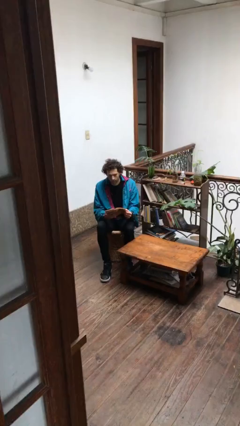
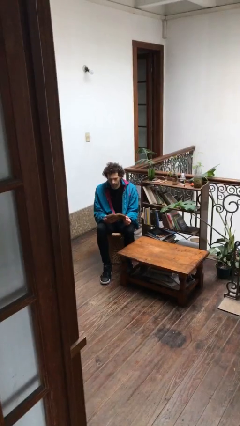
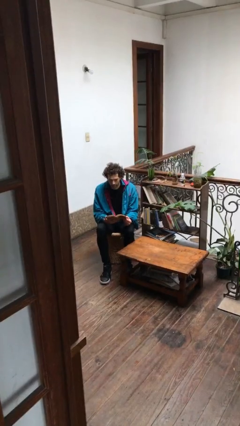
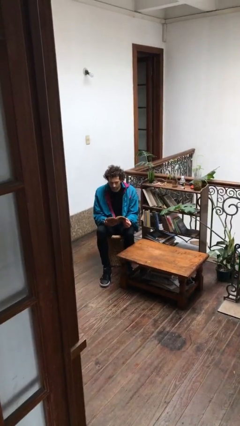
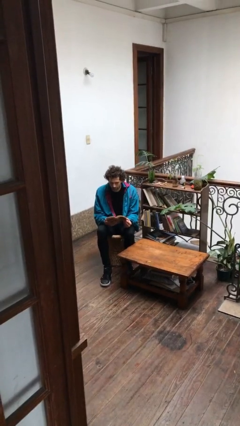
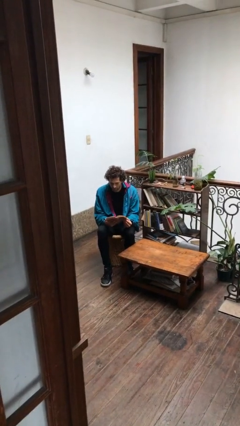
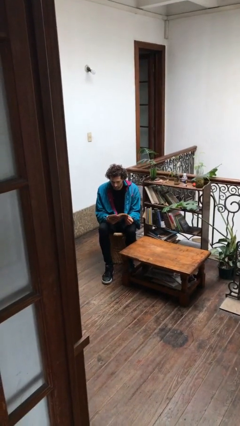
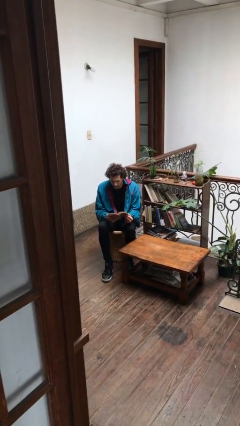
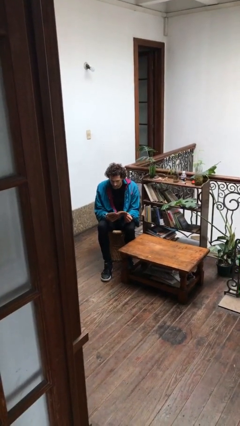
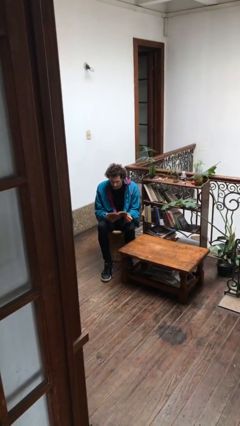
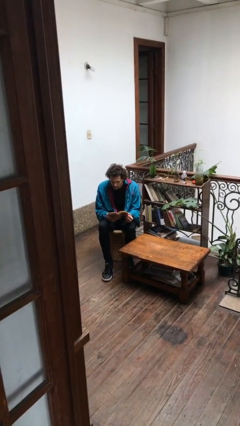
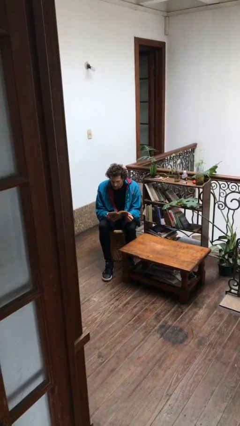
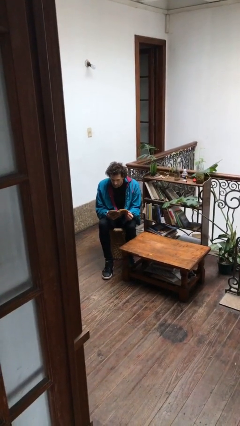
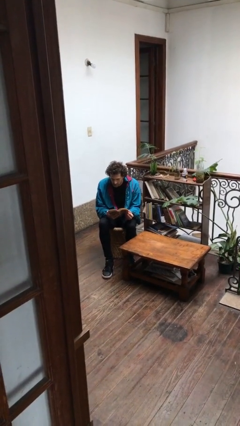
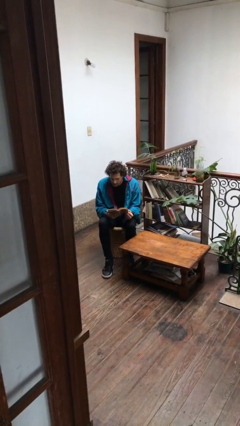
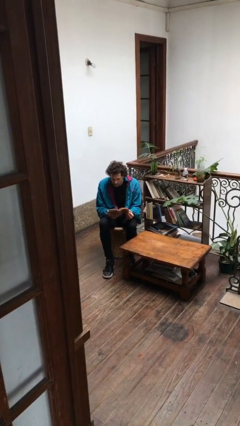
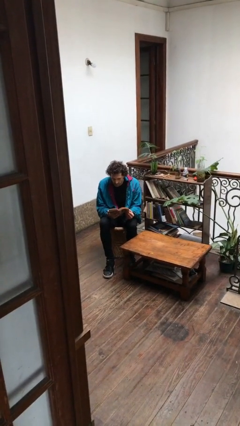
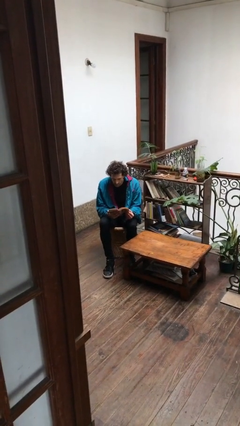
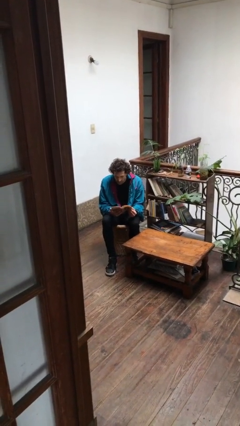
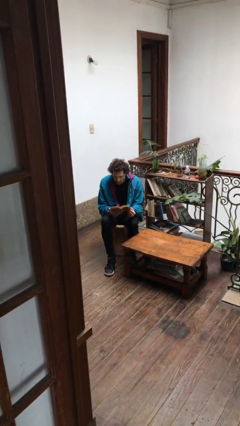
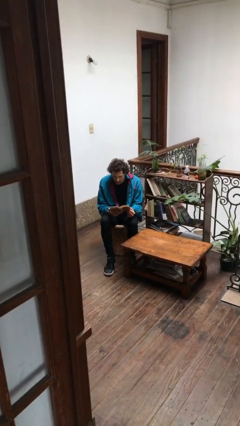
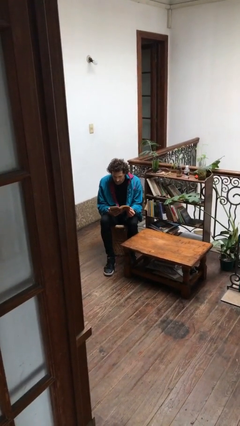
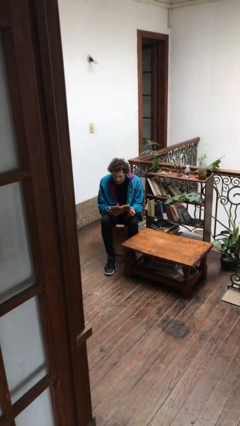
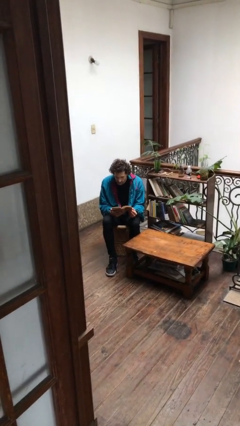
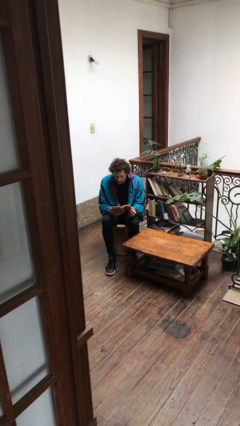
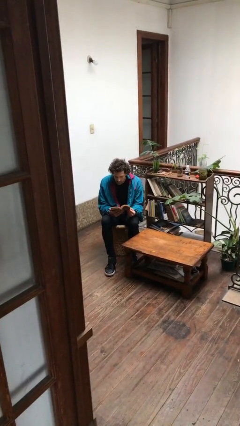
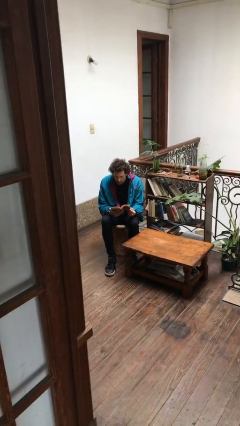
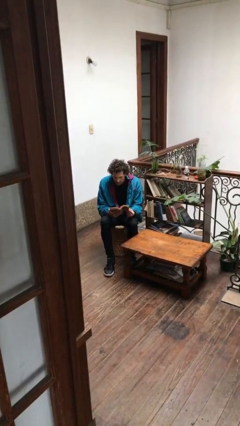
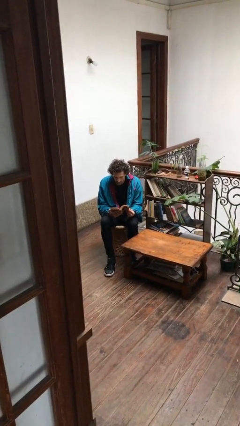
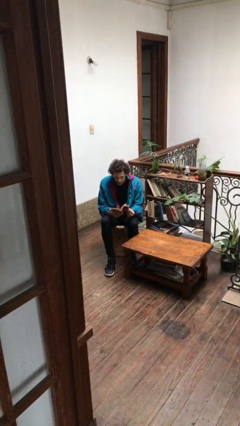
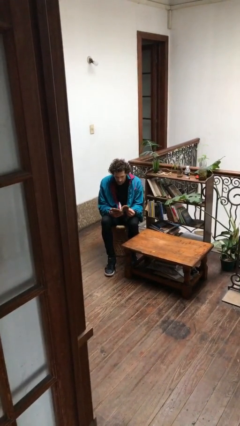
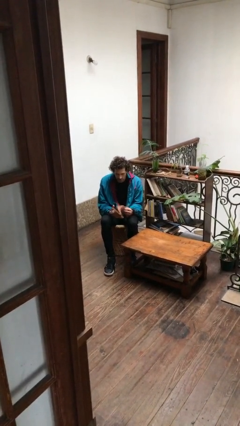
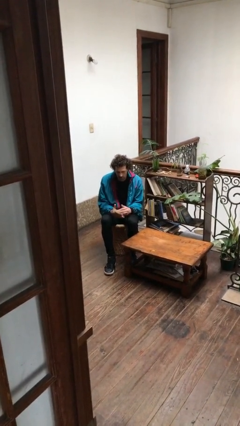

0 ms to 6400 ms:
person reads document

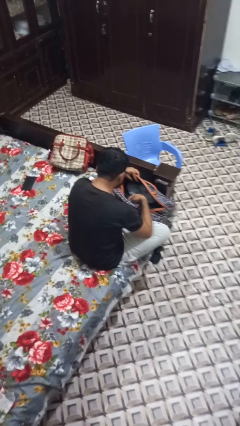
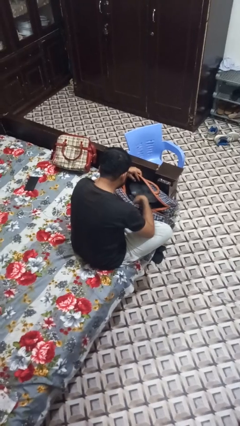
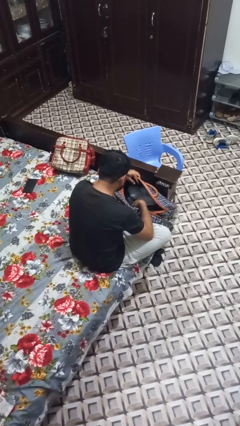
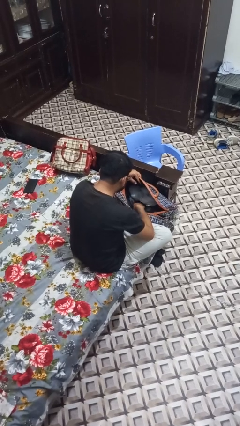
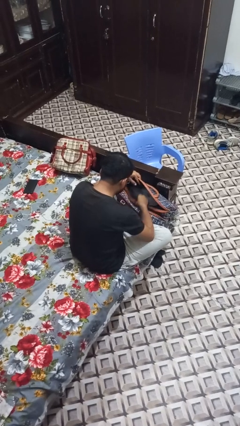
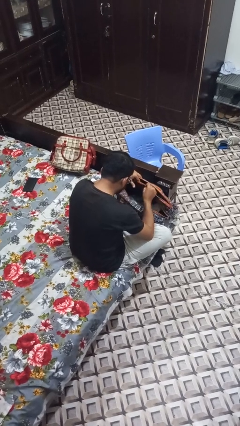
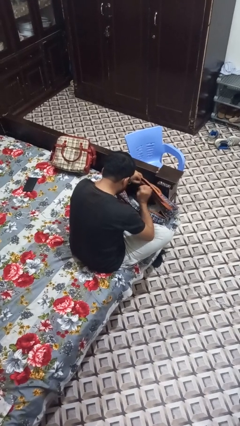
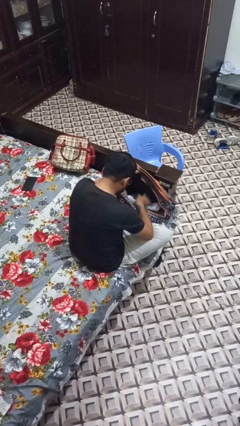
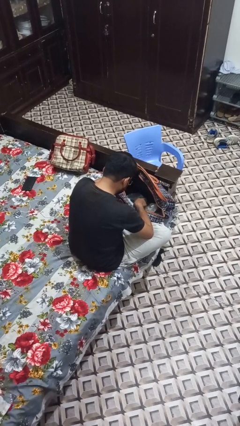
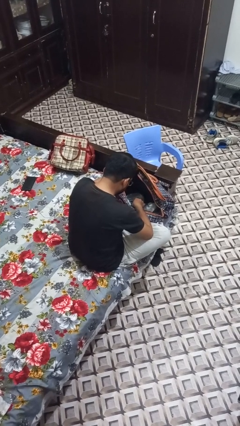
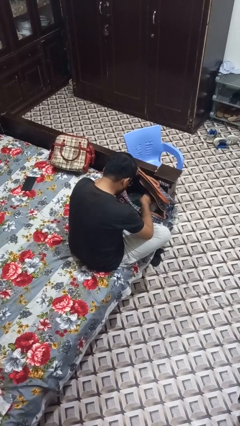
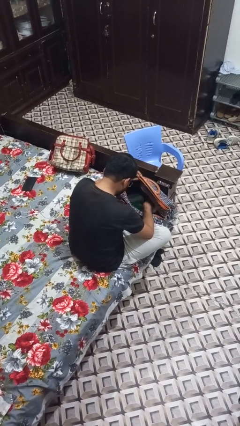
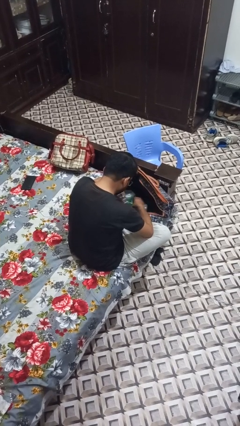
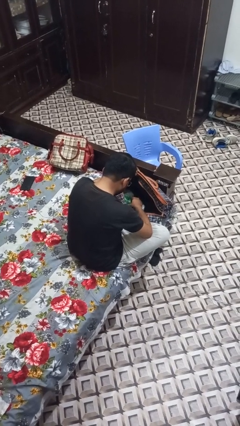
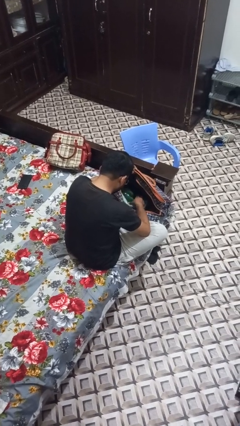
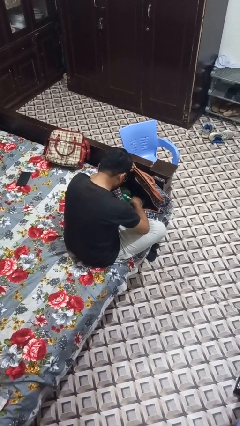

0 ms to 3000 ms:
person searches in backpack

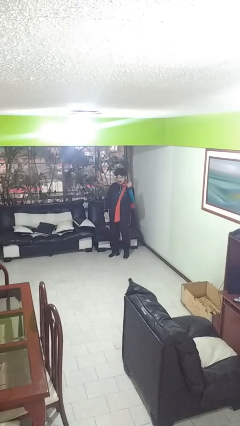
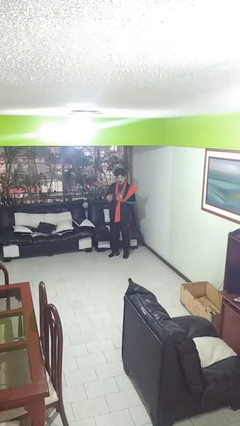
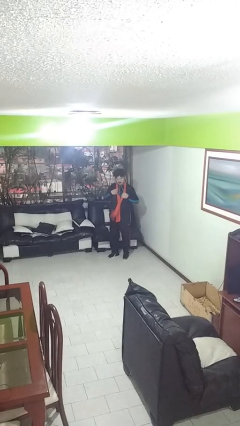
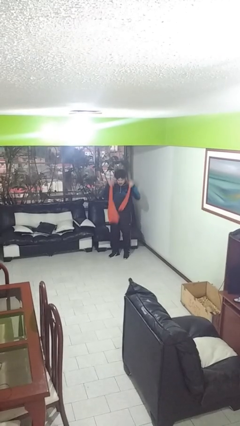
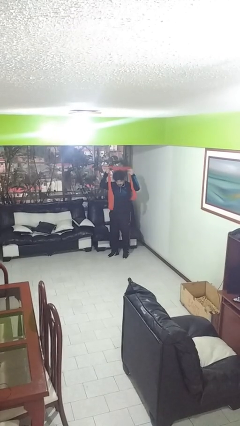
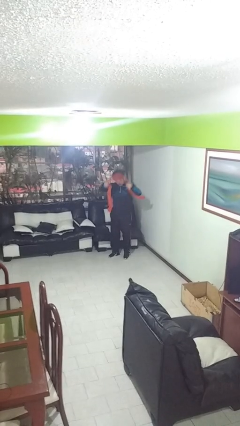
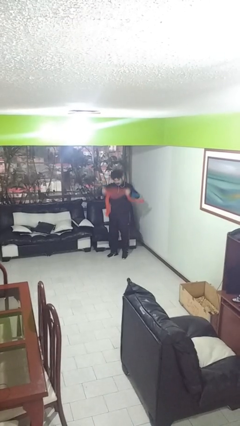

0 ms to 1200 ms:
person takes off scarf

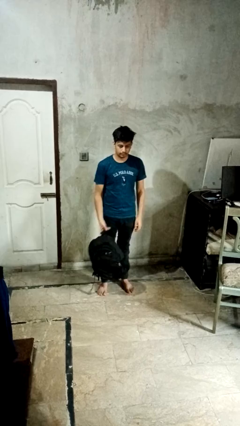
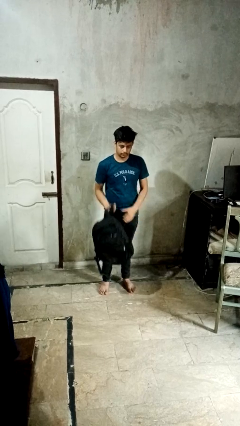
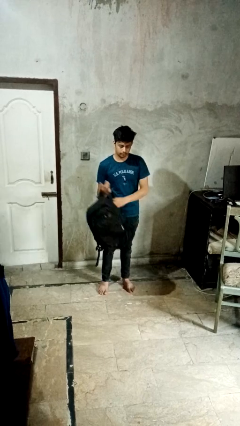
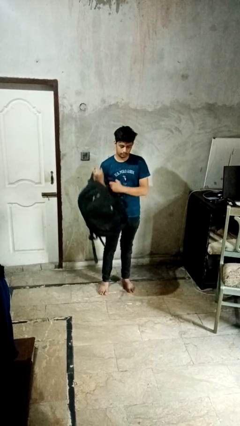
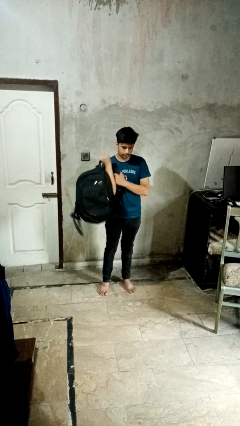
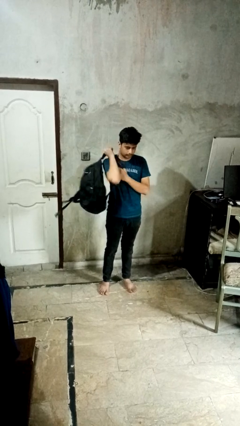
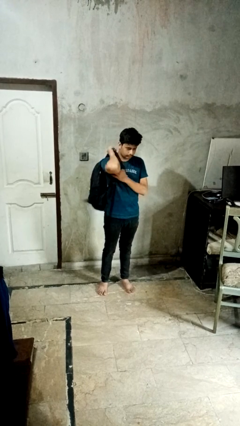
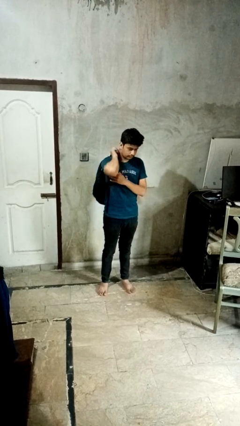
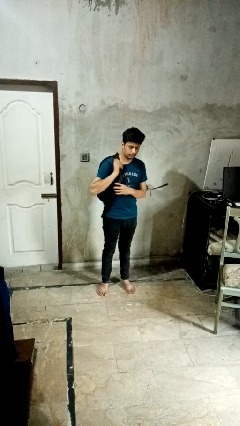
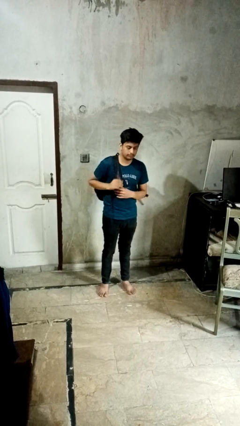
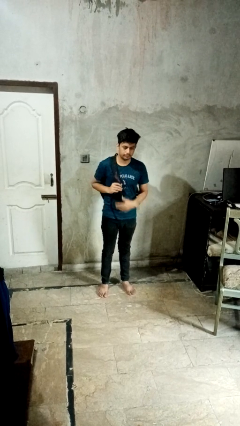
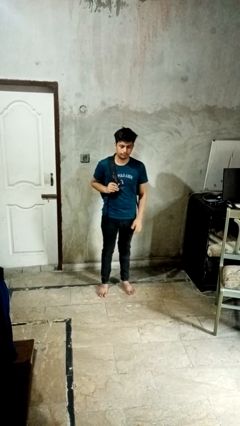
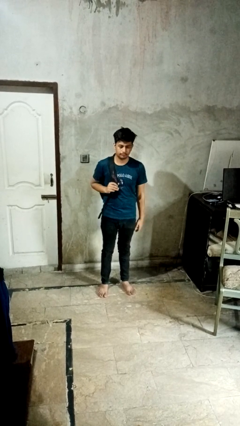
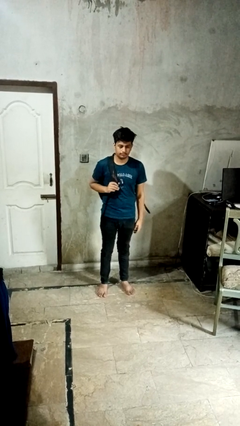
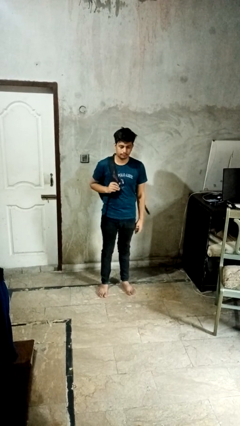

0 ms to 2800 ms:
person puts on backpack

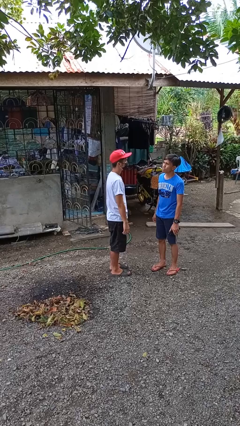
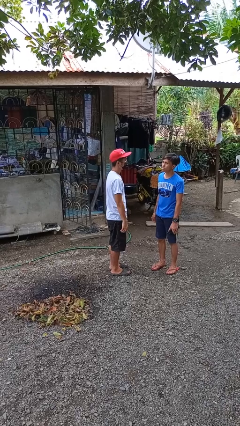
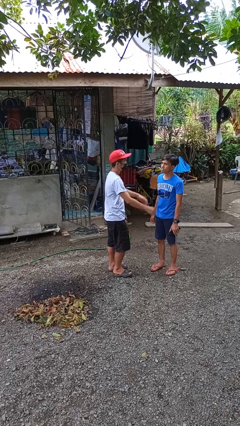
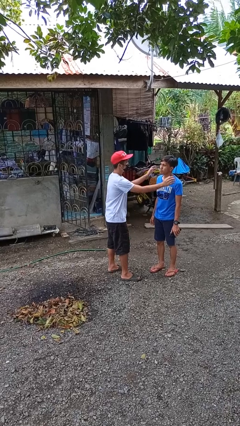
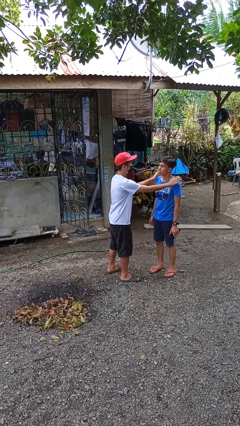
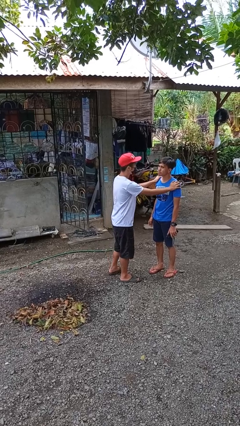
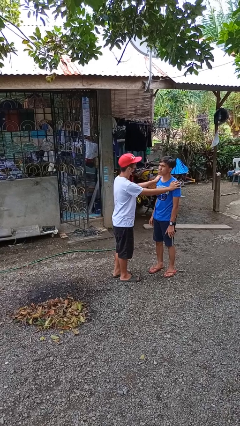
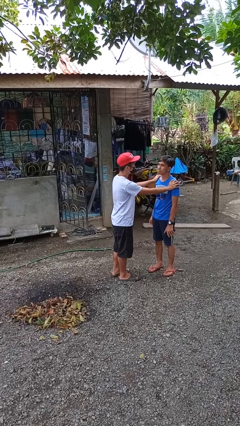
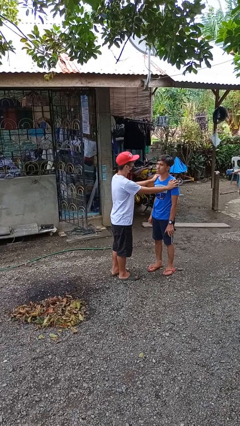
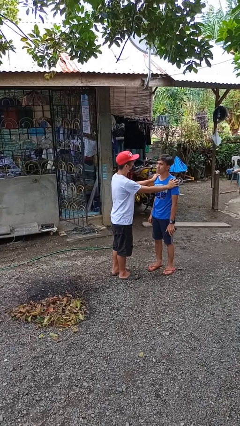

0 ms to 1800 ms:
person grabs person by shoulder

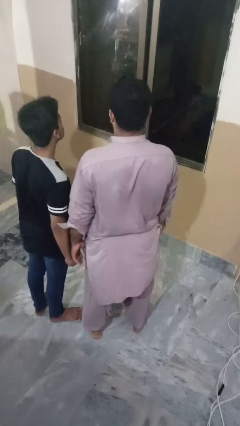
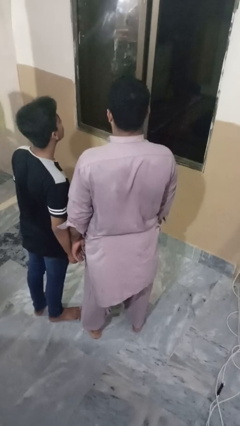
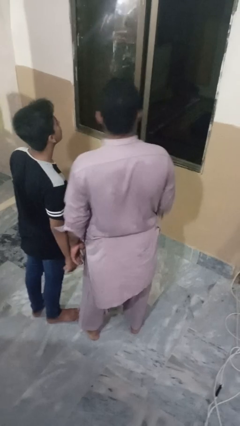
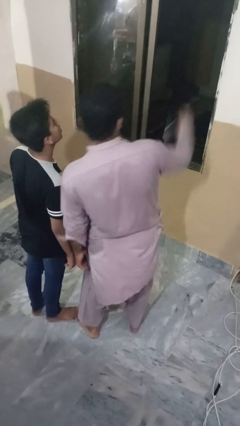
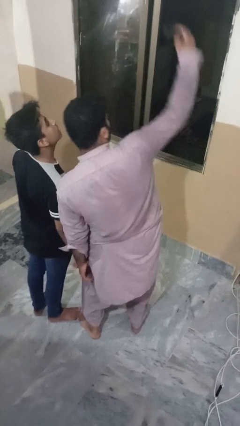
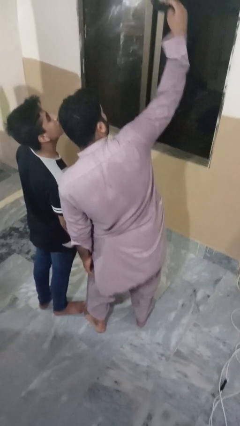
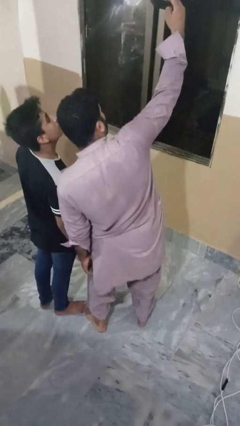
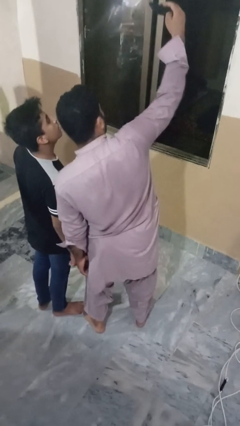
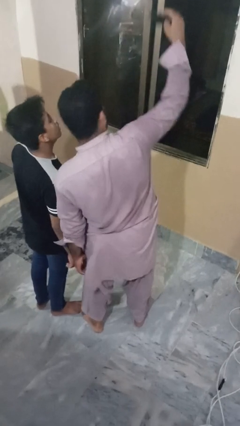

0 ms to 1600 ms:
person takes selfie with person

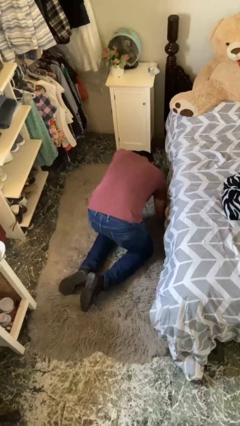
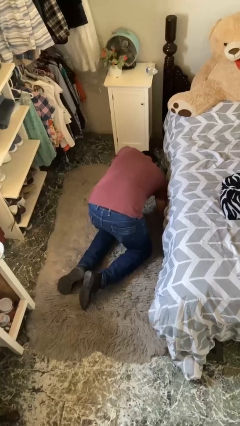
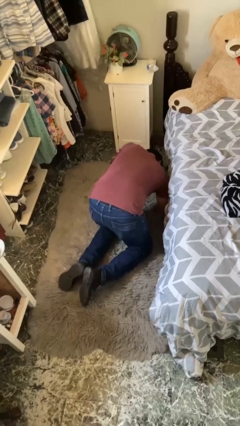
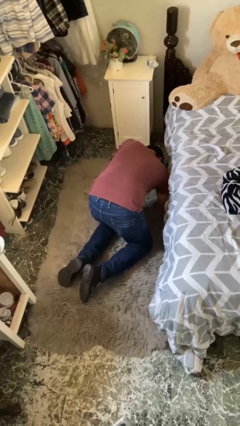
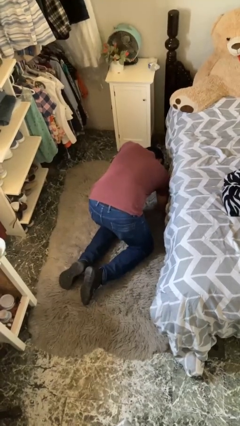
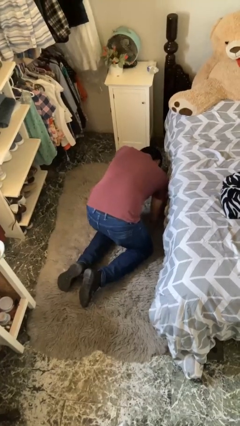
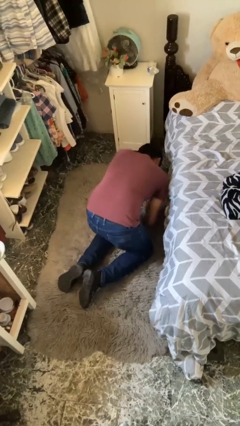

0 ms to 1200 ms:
person searches under bed
